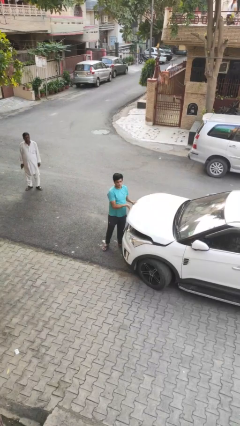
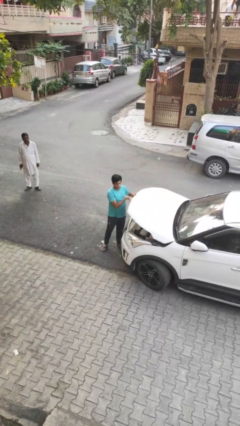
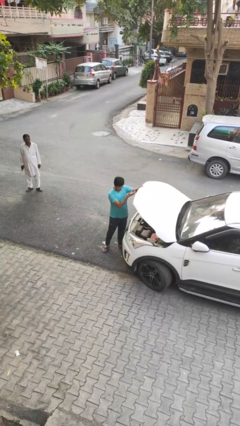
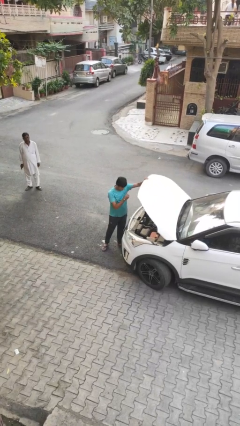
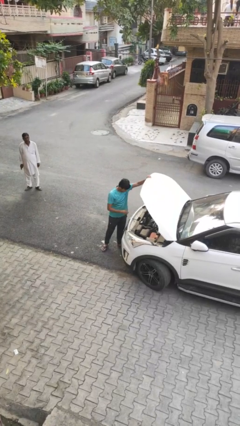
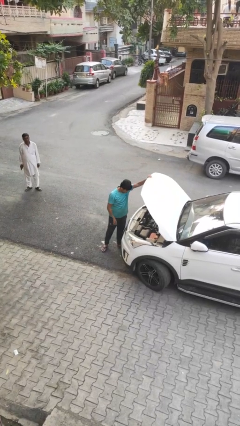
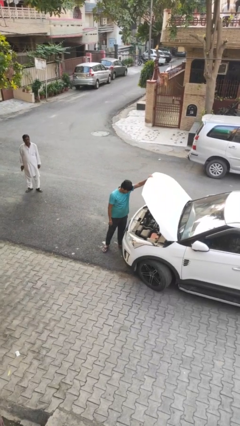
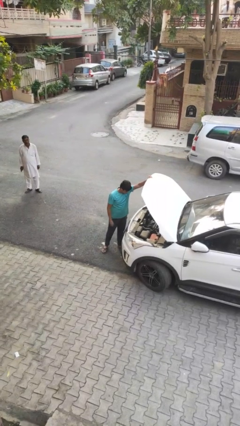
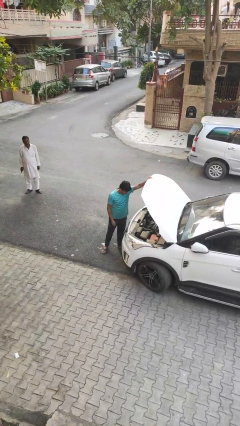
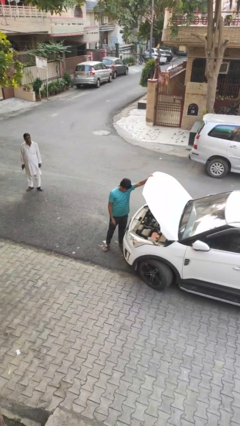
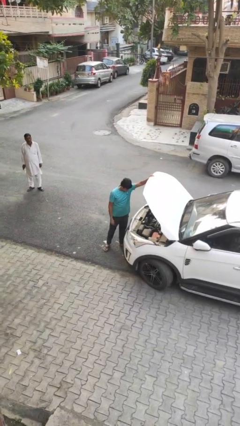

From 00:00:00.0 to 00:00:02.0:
person opens car hood

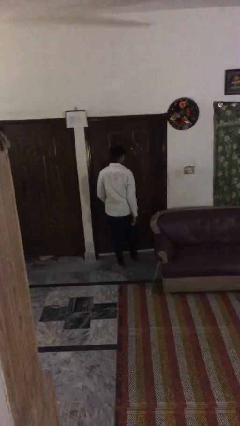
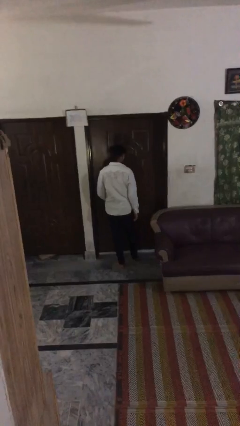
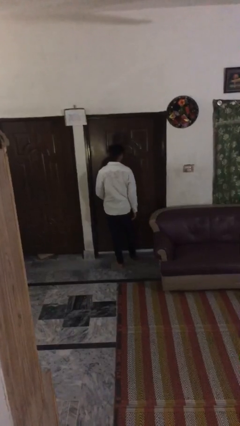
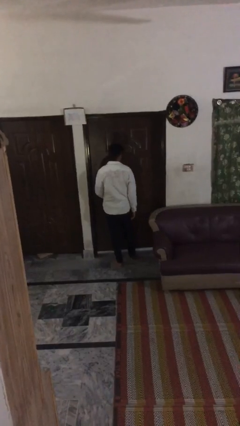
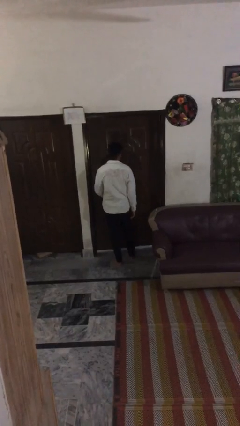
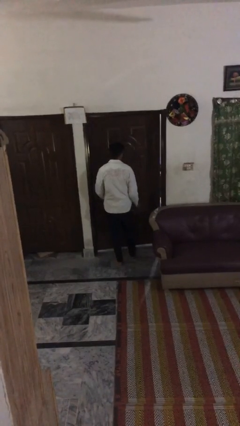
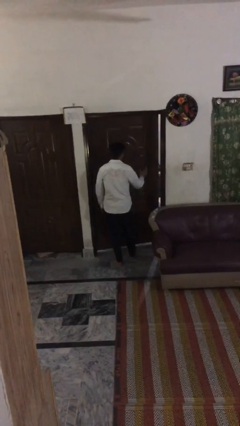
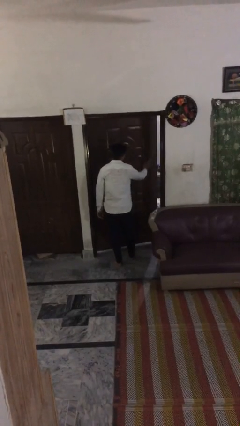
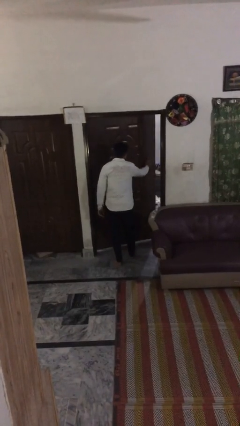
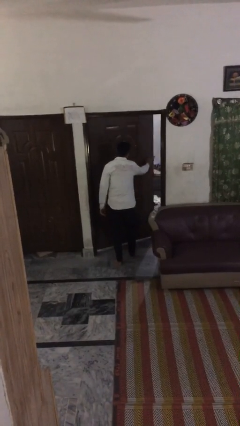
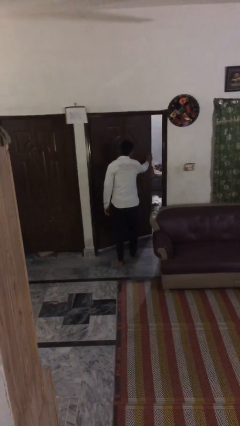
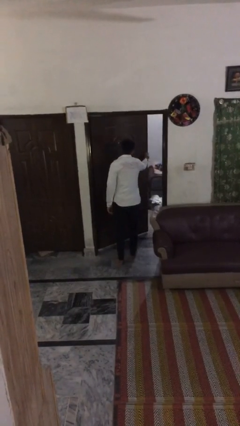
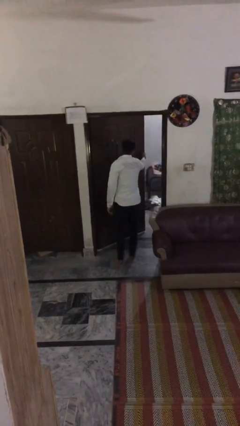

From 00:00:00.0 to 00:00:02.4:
person opens facility door

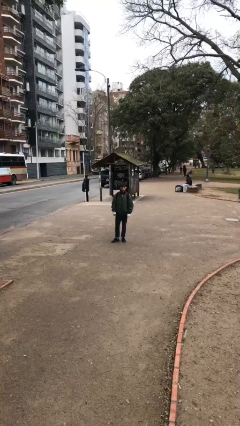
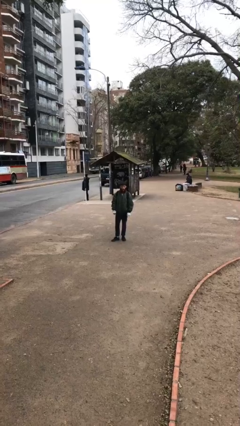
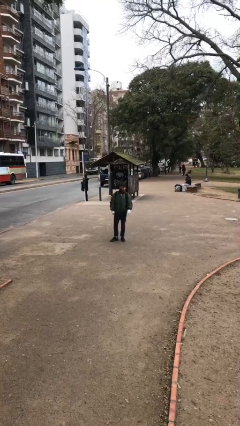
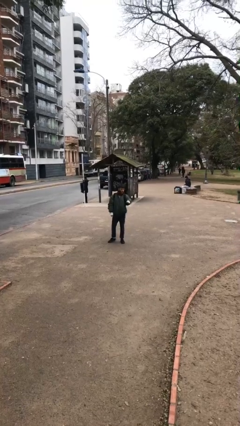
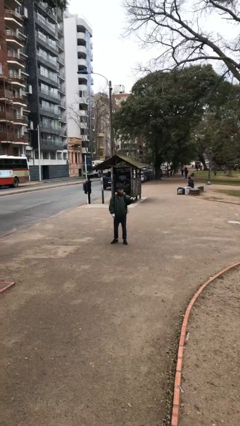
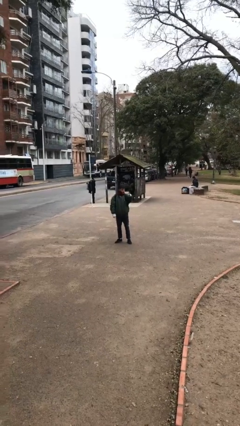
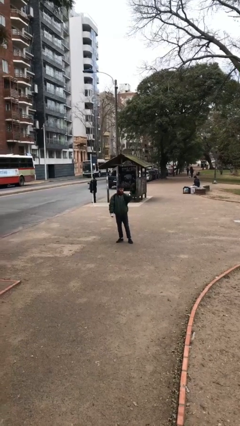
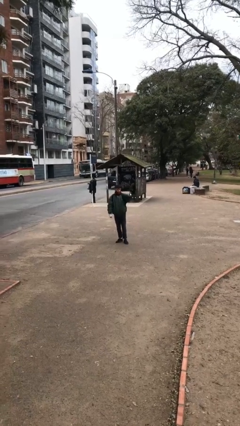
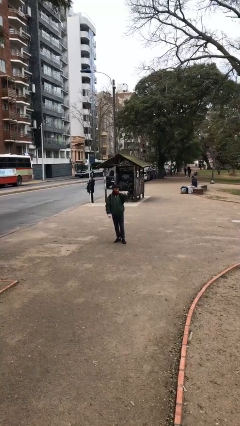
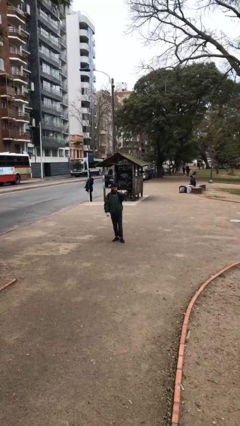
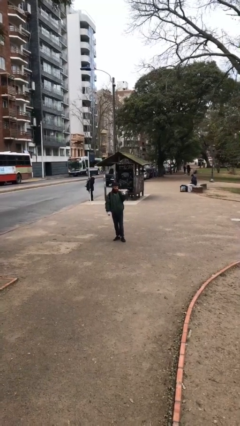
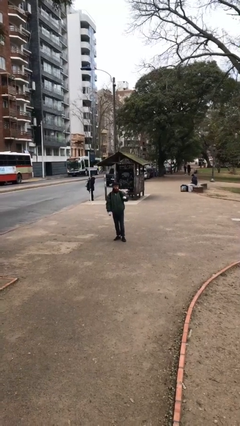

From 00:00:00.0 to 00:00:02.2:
person points at person

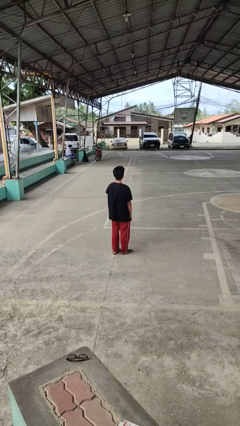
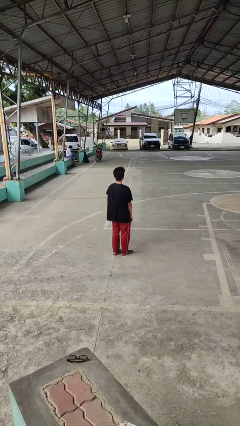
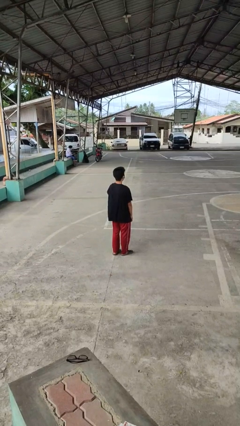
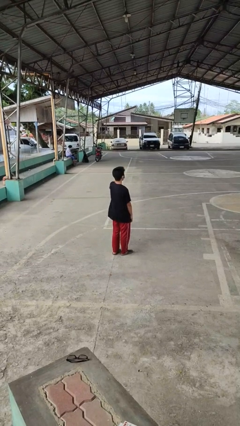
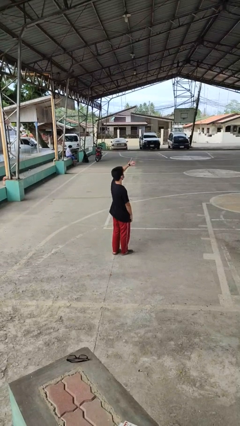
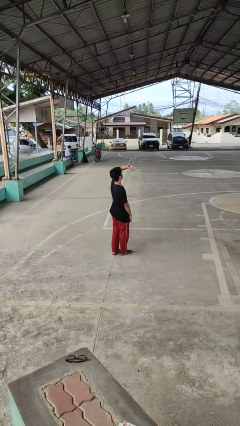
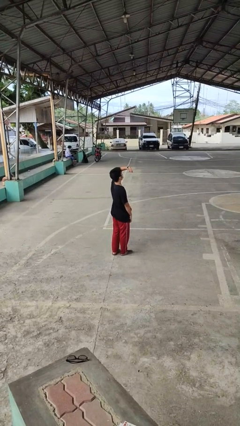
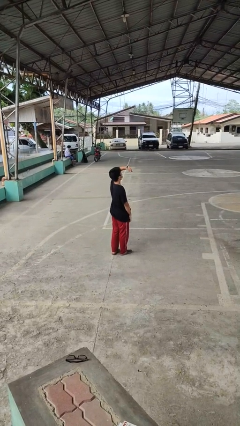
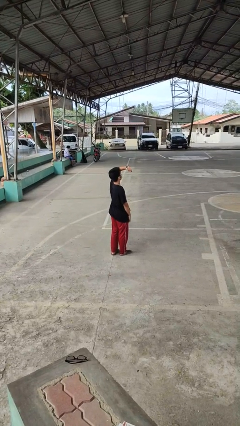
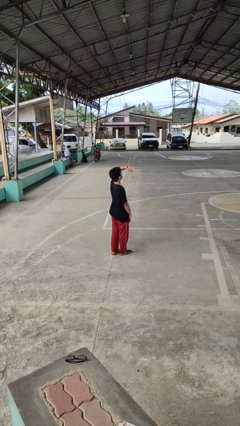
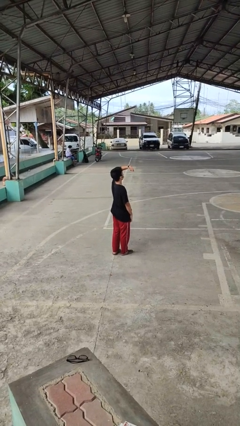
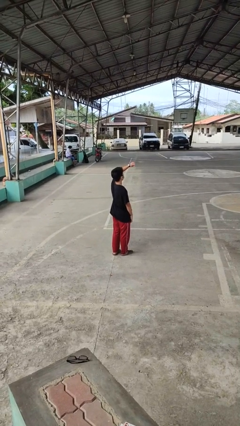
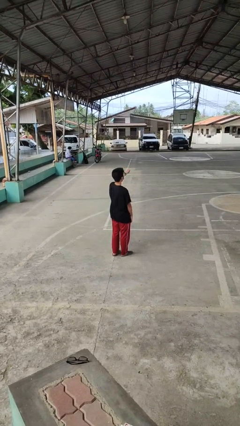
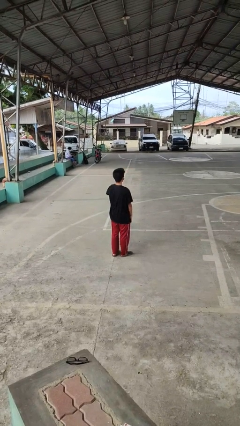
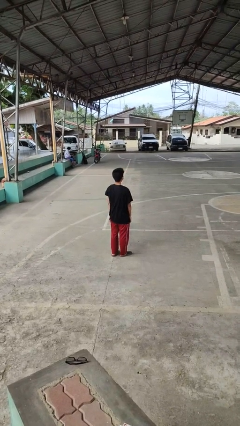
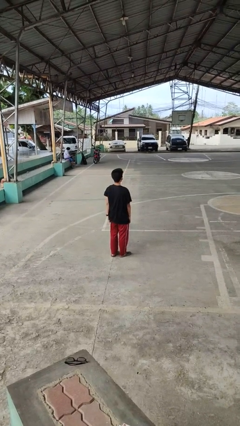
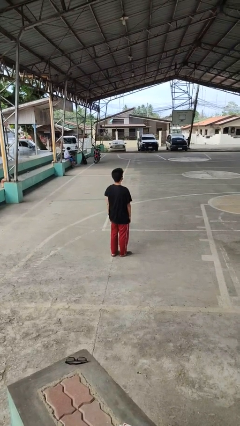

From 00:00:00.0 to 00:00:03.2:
person looks at wristwatch

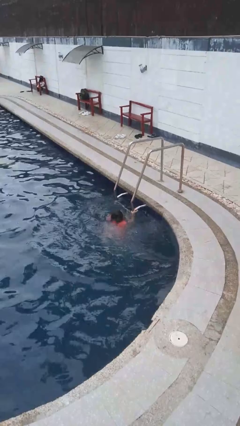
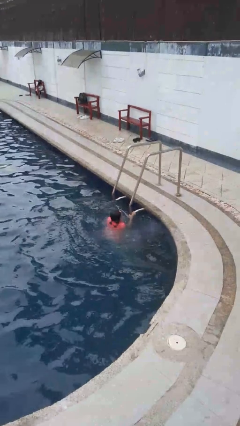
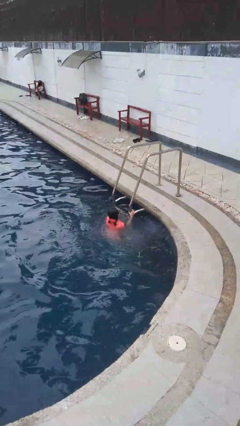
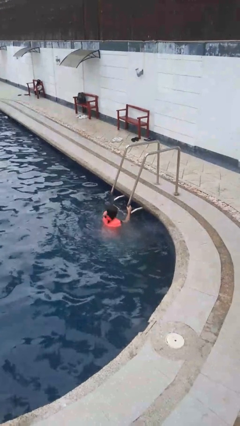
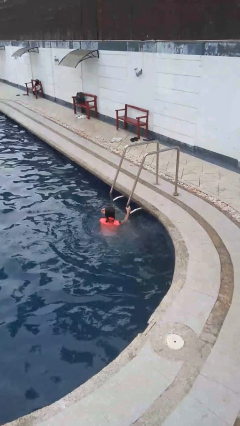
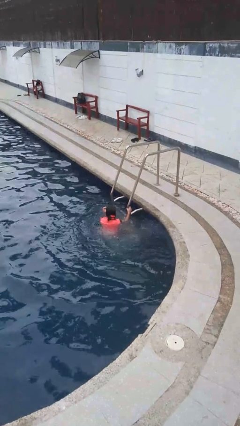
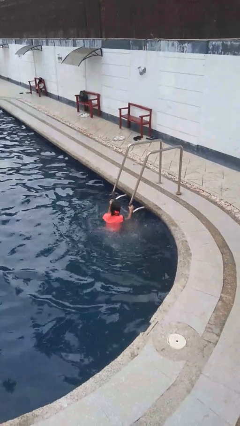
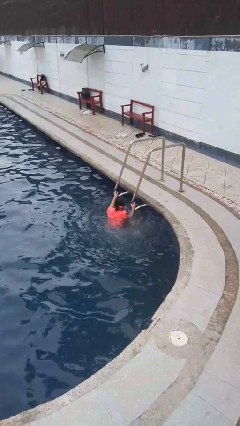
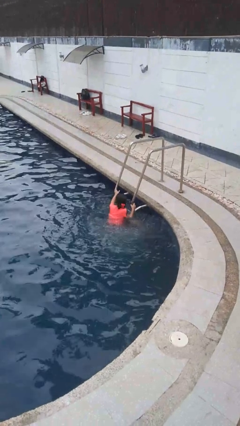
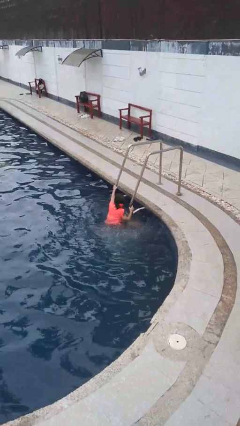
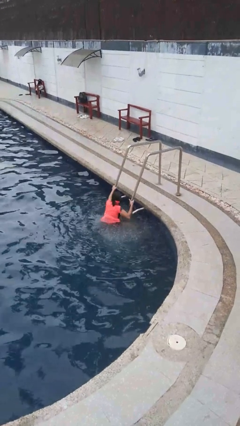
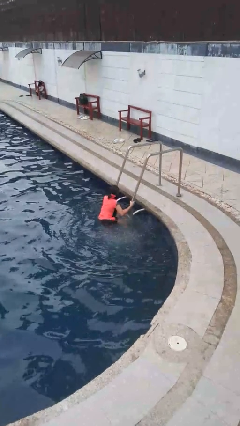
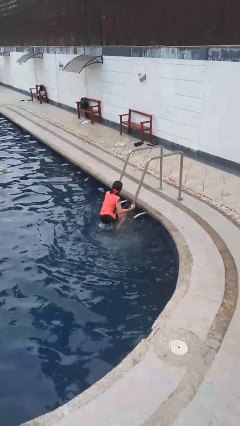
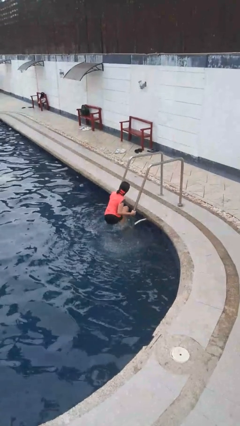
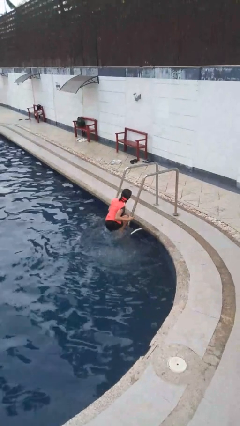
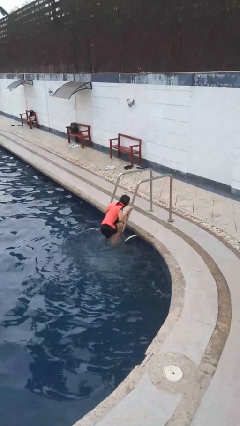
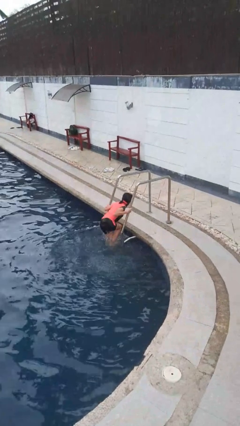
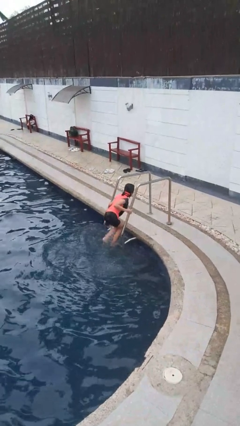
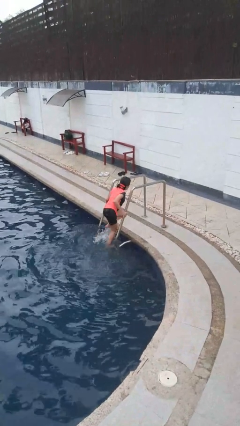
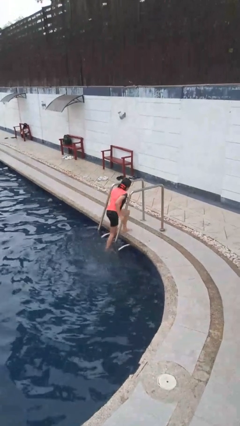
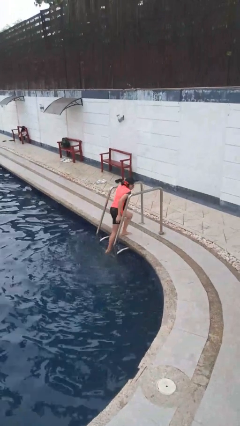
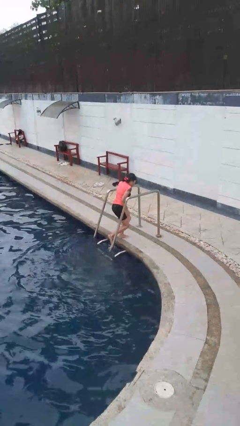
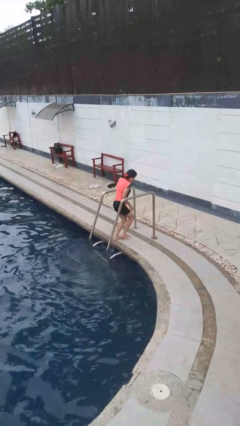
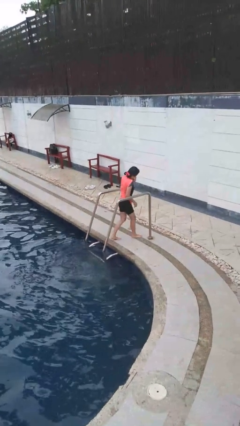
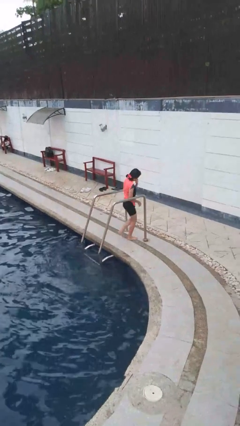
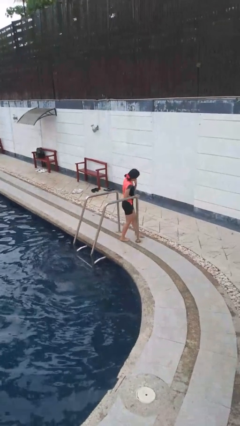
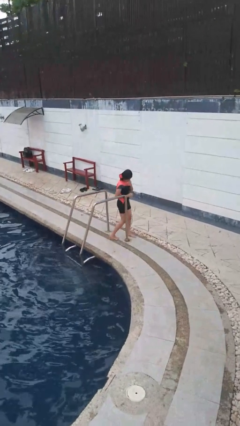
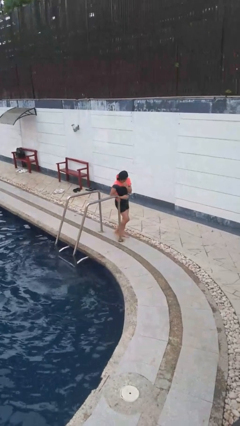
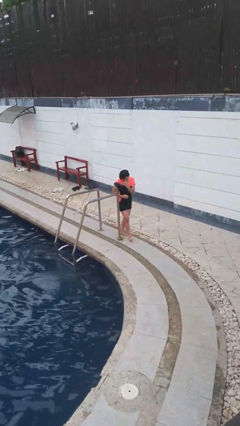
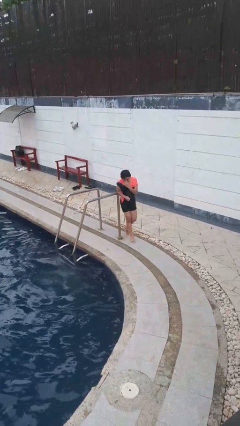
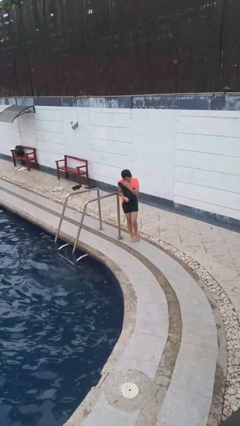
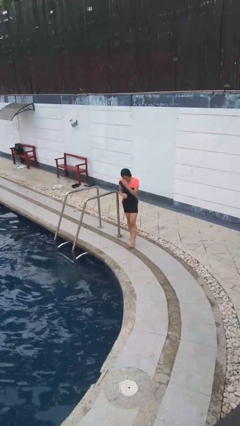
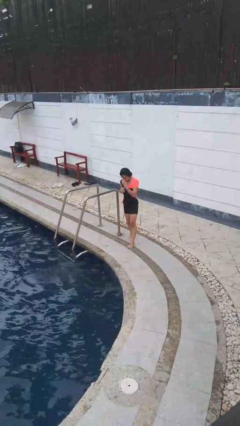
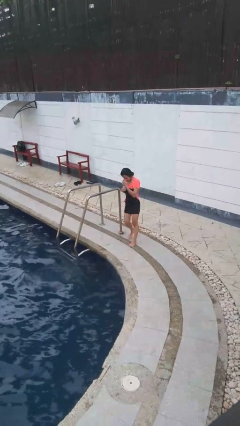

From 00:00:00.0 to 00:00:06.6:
person exits pool

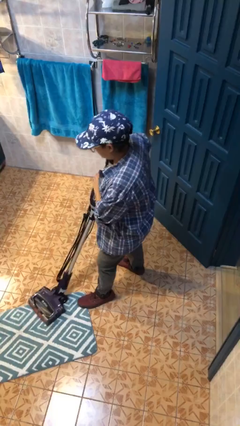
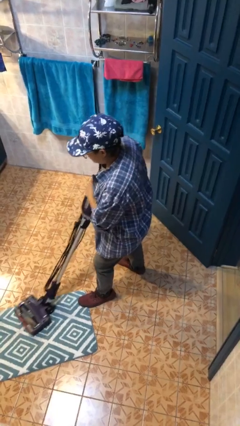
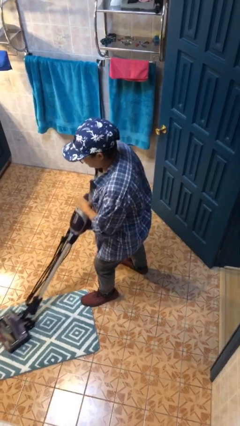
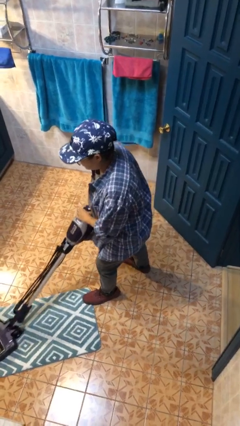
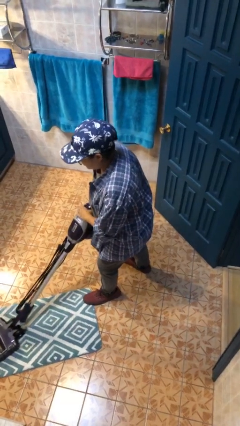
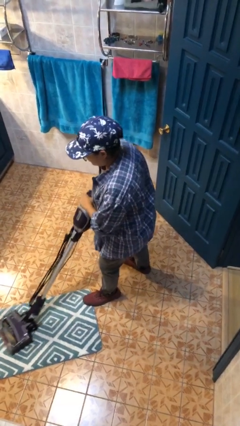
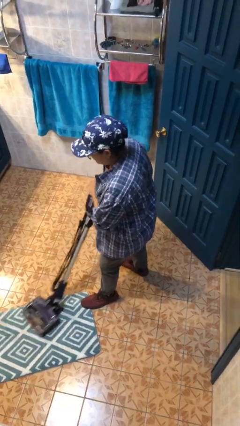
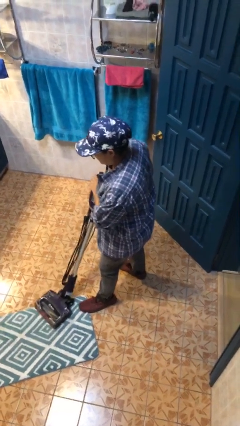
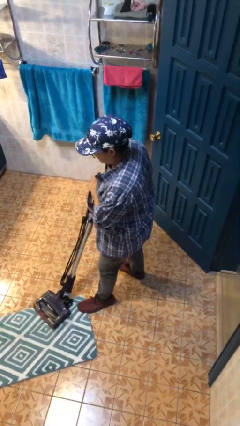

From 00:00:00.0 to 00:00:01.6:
person vacuums carpet
